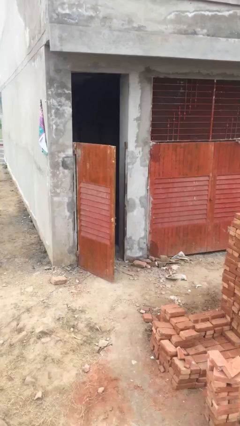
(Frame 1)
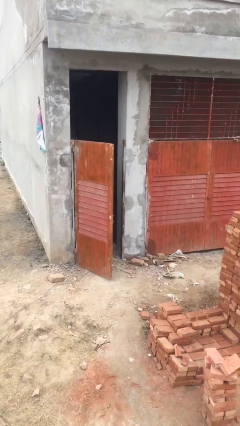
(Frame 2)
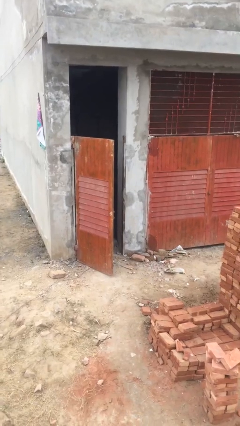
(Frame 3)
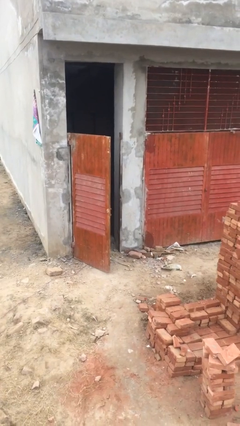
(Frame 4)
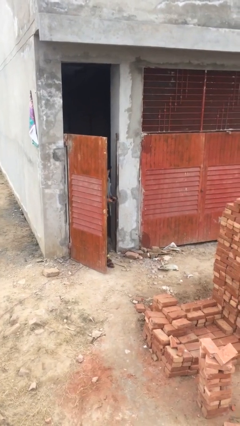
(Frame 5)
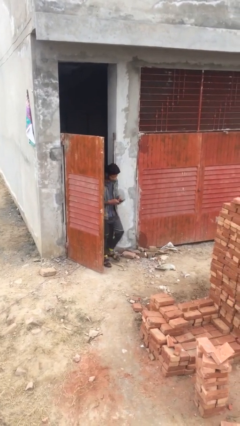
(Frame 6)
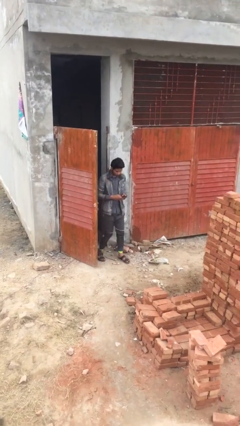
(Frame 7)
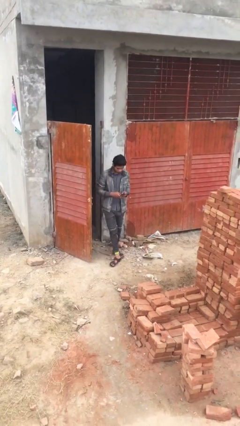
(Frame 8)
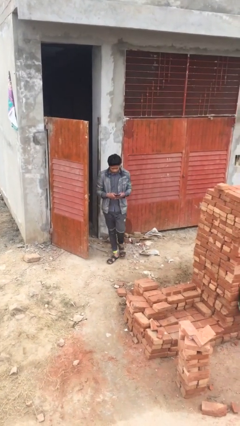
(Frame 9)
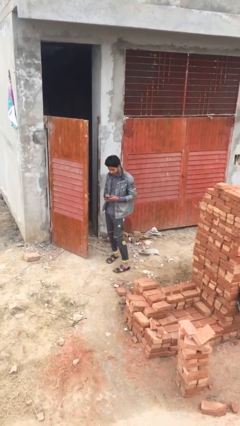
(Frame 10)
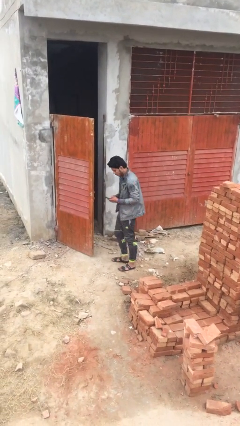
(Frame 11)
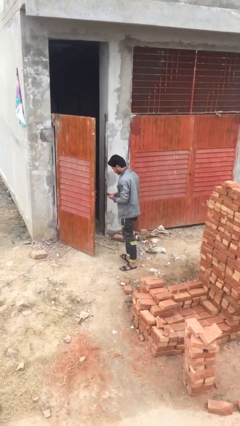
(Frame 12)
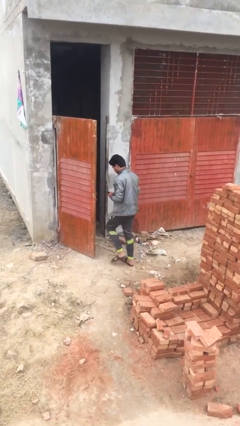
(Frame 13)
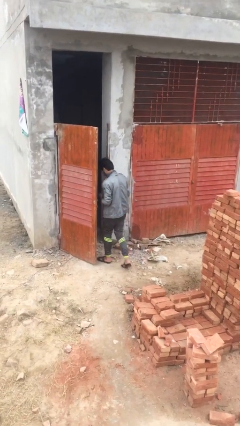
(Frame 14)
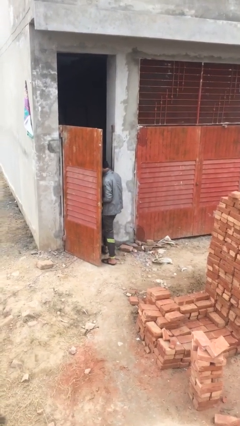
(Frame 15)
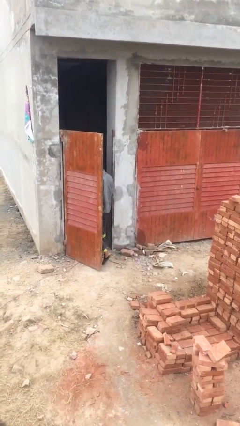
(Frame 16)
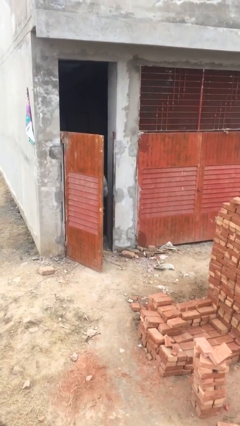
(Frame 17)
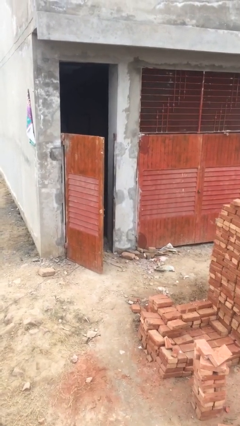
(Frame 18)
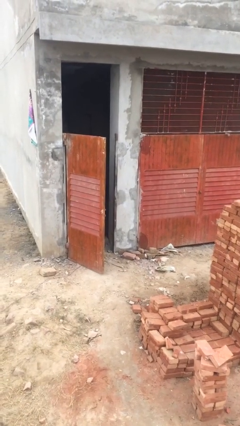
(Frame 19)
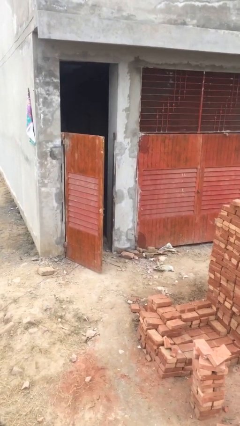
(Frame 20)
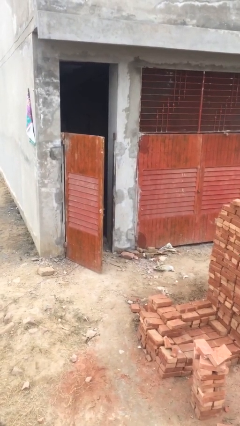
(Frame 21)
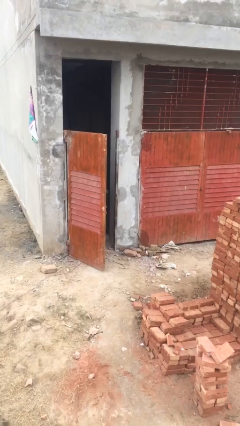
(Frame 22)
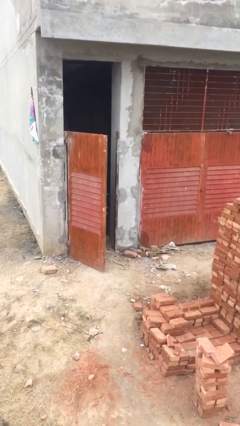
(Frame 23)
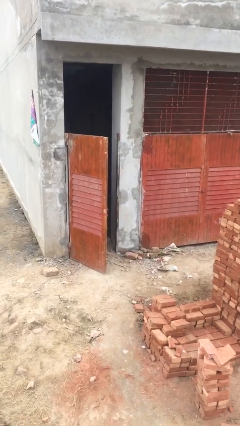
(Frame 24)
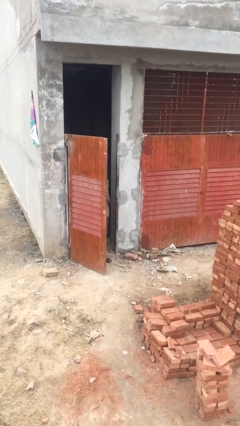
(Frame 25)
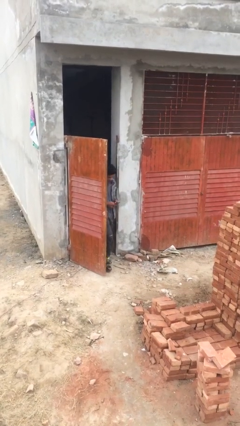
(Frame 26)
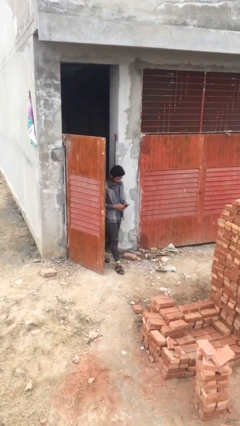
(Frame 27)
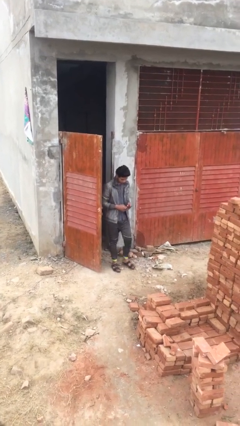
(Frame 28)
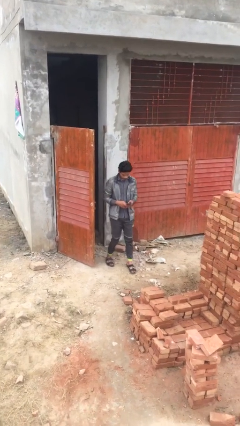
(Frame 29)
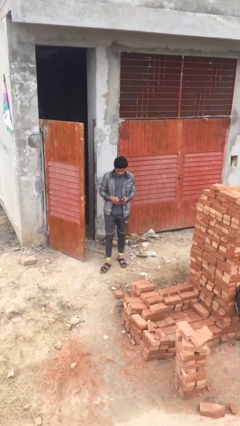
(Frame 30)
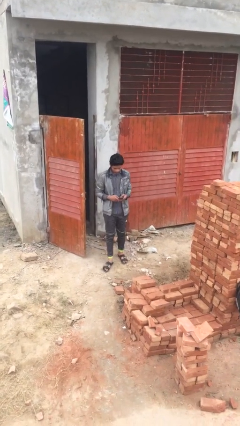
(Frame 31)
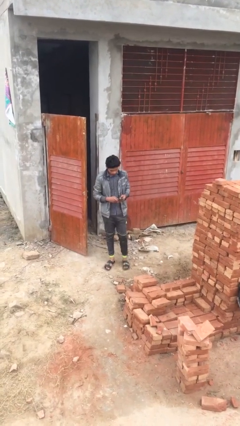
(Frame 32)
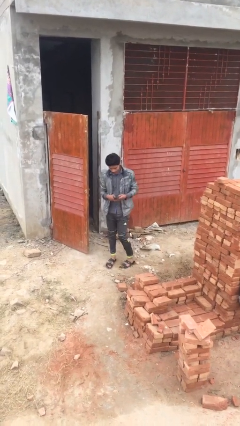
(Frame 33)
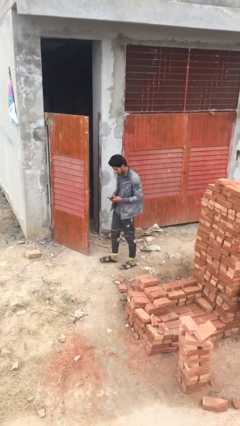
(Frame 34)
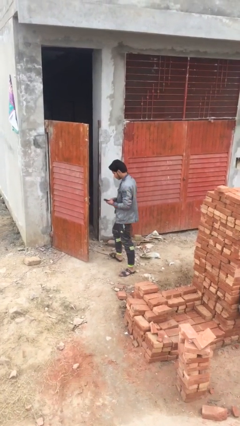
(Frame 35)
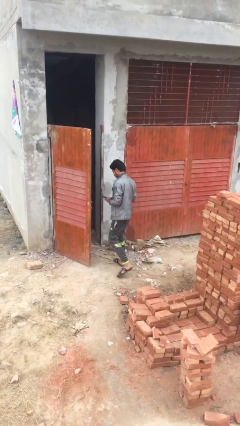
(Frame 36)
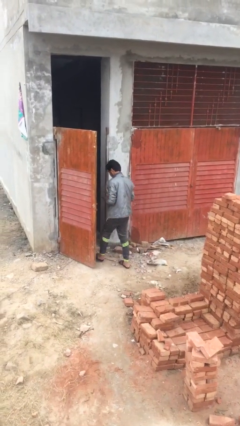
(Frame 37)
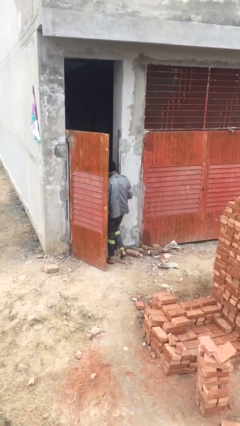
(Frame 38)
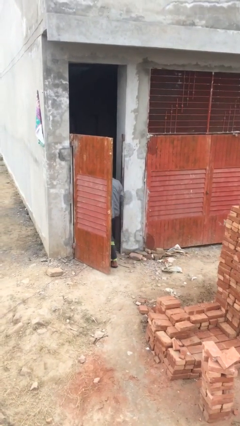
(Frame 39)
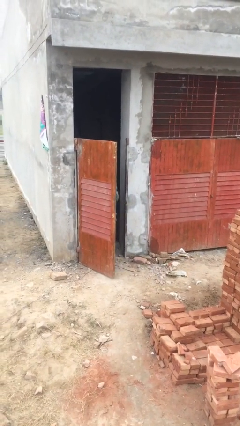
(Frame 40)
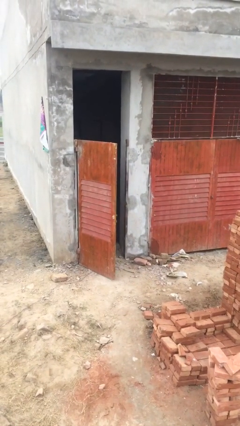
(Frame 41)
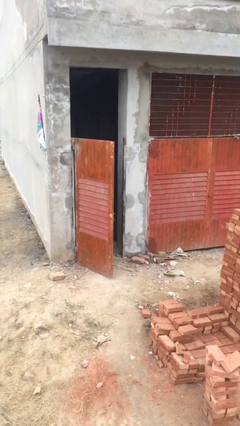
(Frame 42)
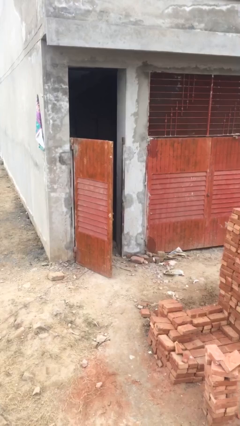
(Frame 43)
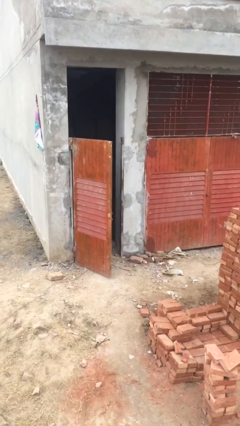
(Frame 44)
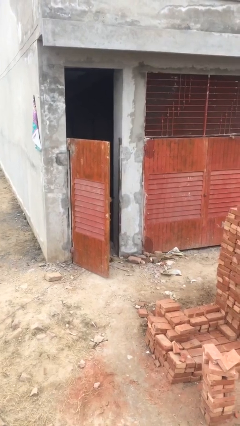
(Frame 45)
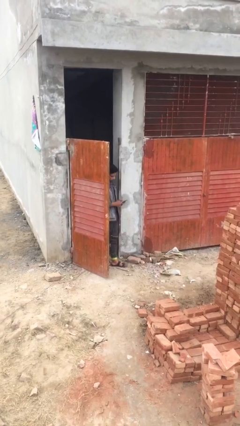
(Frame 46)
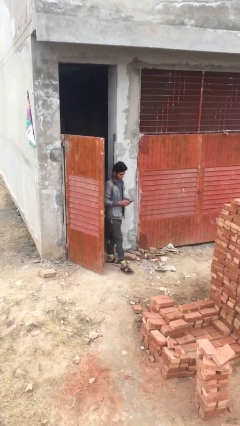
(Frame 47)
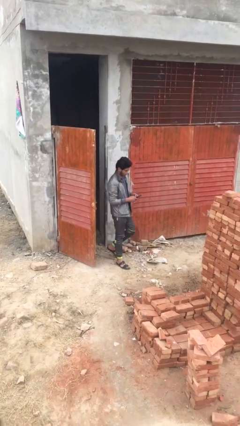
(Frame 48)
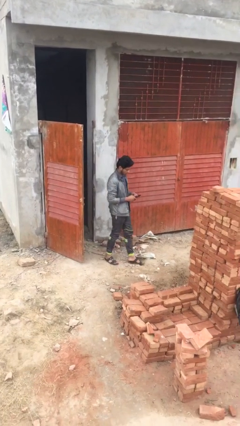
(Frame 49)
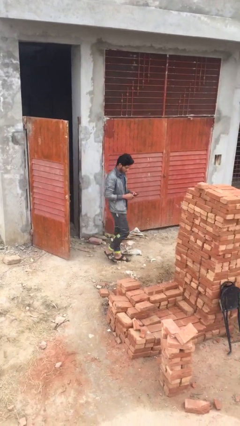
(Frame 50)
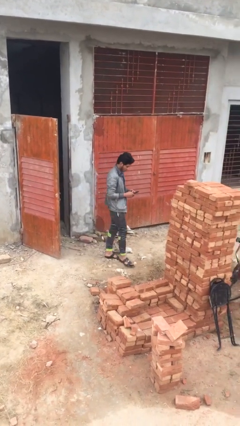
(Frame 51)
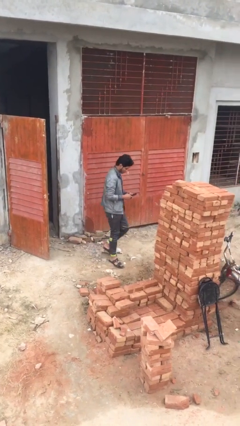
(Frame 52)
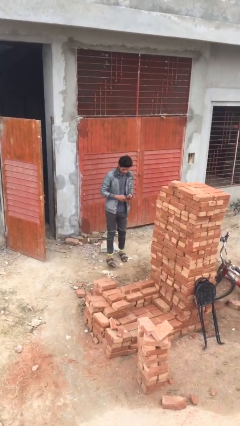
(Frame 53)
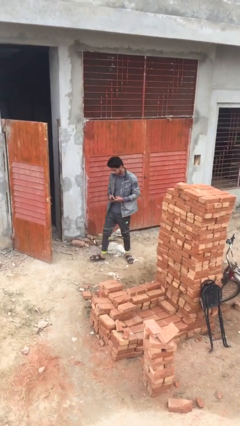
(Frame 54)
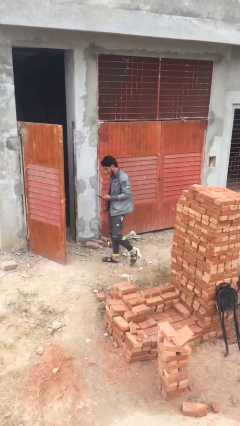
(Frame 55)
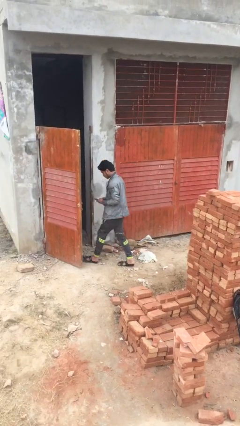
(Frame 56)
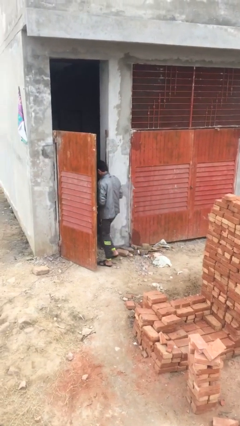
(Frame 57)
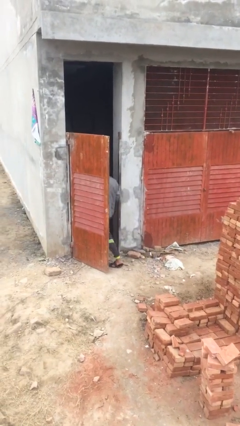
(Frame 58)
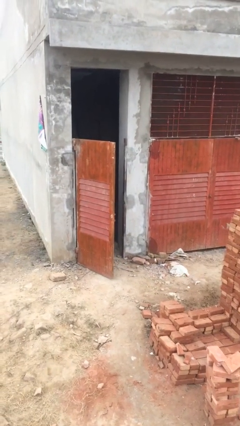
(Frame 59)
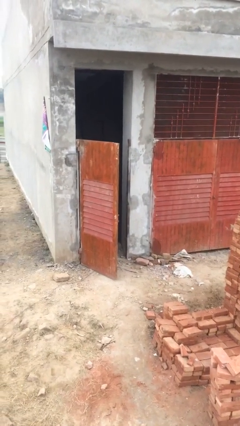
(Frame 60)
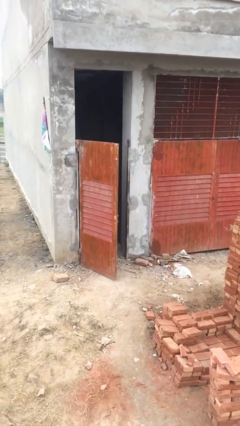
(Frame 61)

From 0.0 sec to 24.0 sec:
person texts on phone

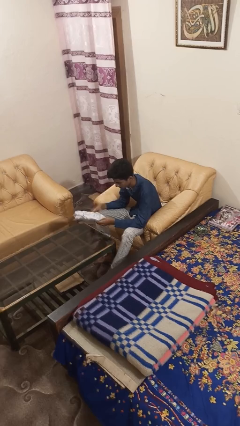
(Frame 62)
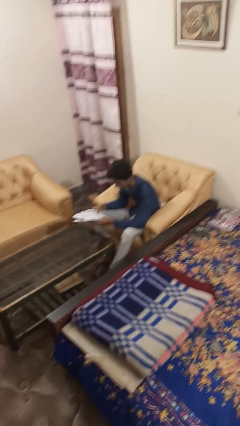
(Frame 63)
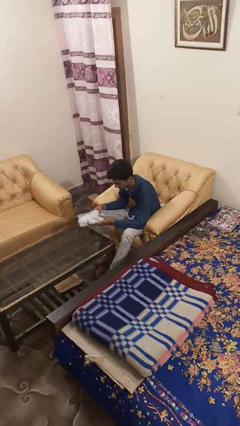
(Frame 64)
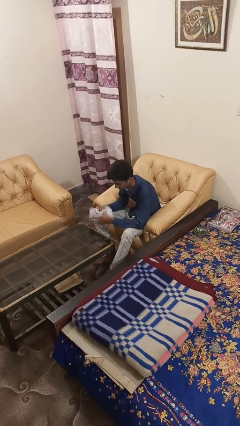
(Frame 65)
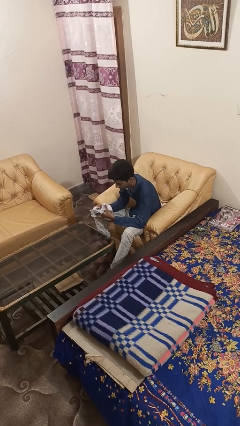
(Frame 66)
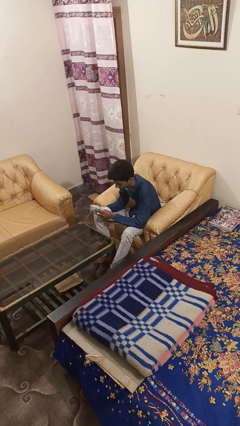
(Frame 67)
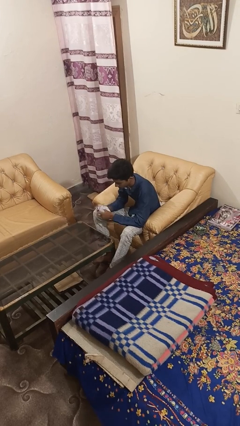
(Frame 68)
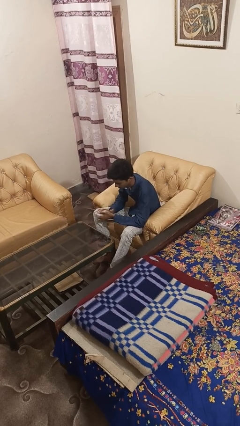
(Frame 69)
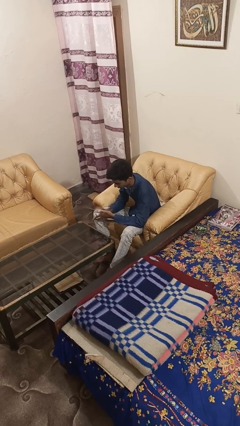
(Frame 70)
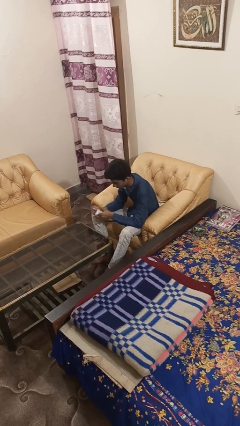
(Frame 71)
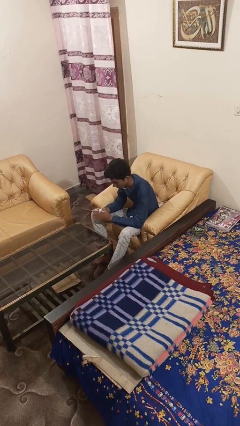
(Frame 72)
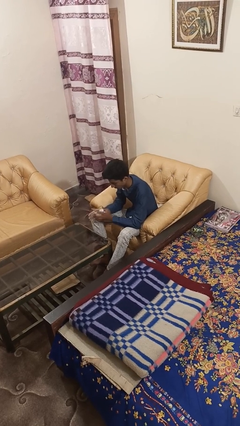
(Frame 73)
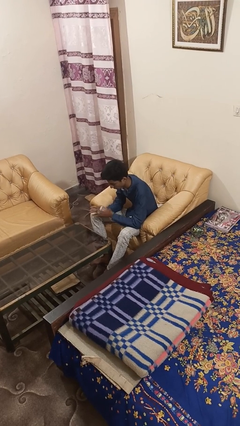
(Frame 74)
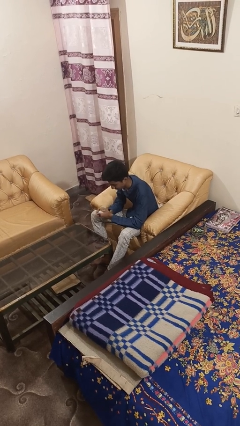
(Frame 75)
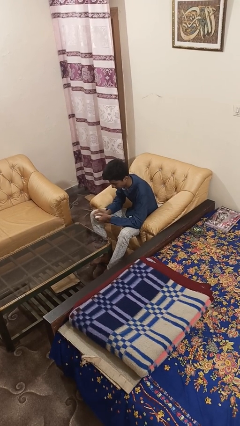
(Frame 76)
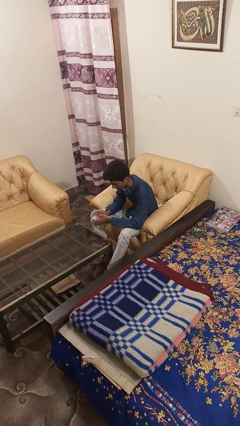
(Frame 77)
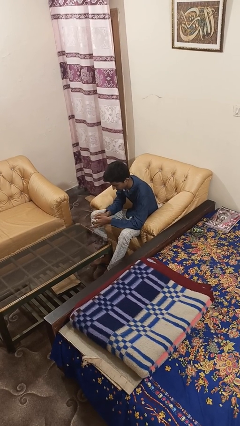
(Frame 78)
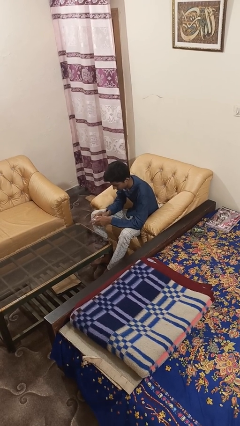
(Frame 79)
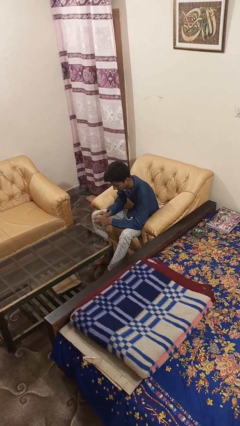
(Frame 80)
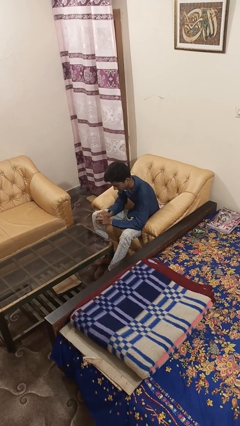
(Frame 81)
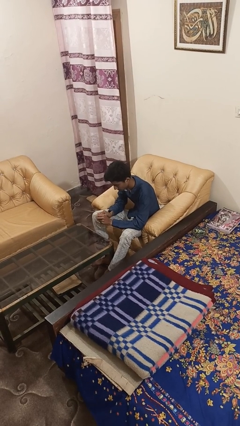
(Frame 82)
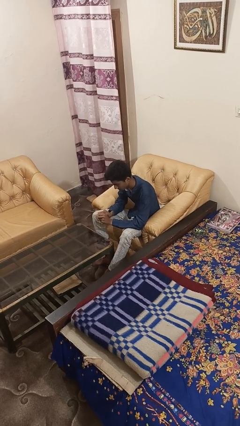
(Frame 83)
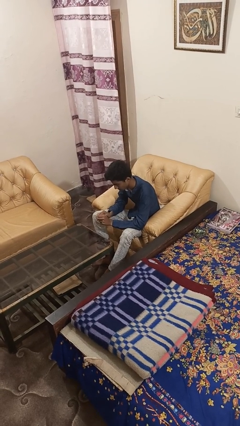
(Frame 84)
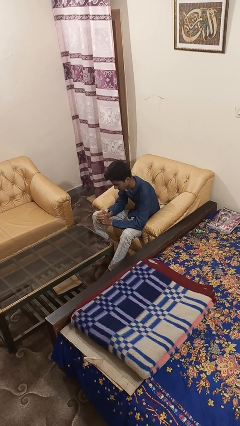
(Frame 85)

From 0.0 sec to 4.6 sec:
person crumples paper

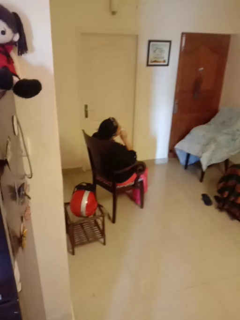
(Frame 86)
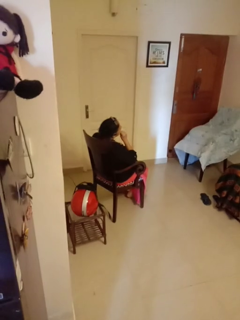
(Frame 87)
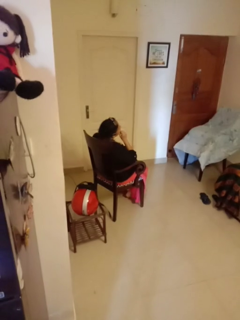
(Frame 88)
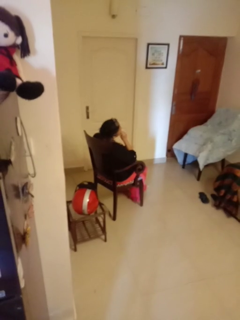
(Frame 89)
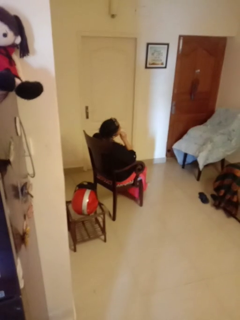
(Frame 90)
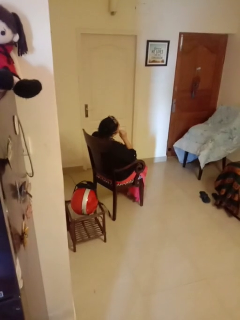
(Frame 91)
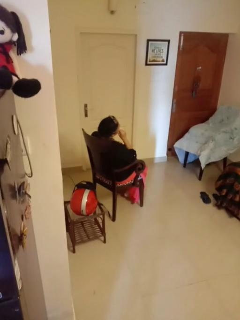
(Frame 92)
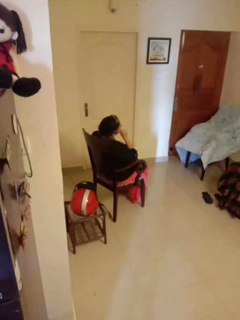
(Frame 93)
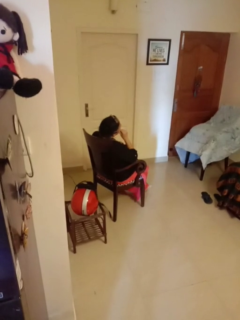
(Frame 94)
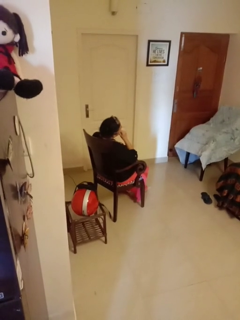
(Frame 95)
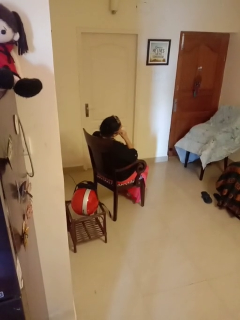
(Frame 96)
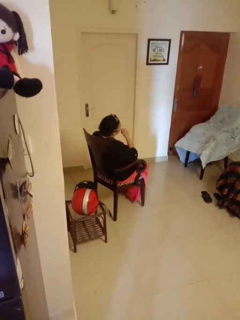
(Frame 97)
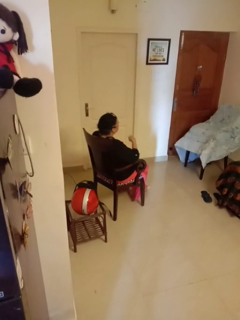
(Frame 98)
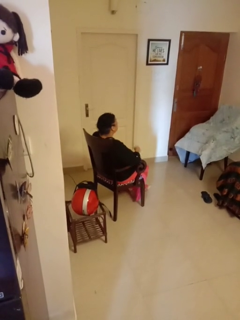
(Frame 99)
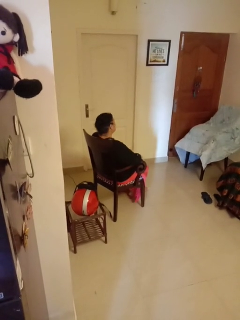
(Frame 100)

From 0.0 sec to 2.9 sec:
person strokes chin
